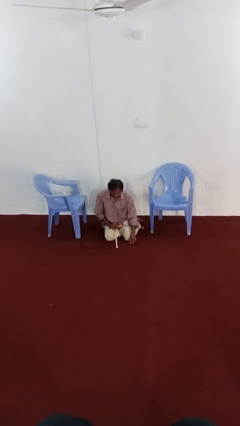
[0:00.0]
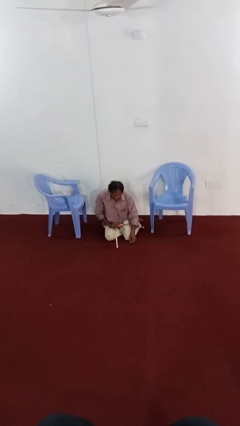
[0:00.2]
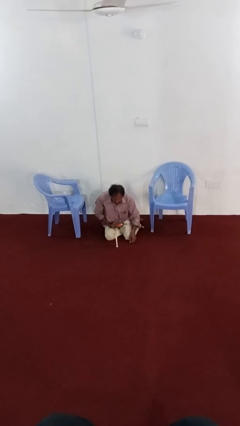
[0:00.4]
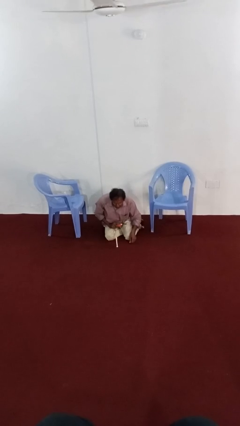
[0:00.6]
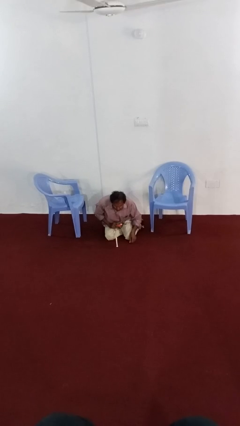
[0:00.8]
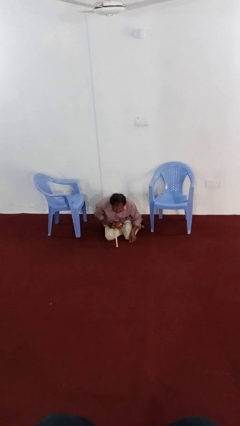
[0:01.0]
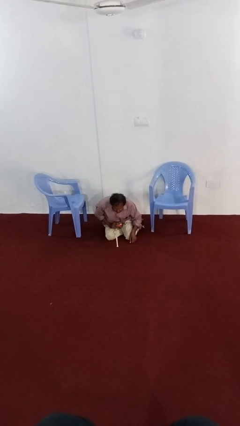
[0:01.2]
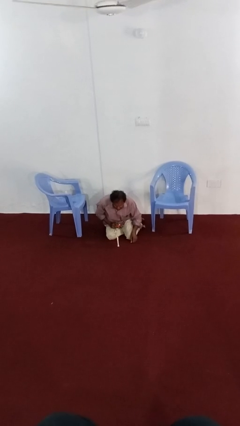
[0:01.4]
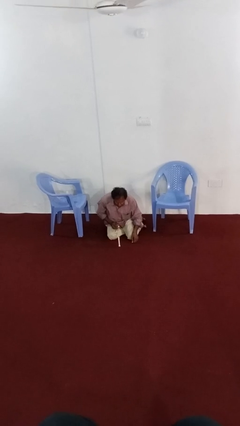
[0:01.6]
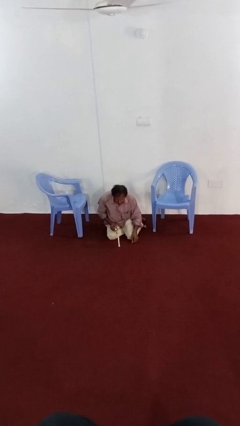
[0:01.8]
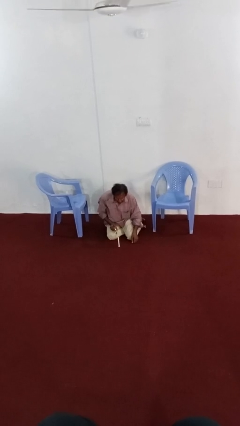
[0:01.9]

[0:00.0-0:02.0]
person extinguishes candle

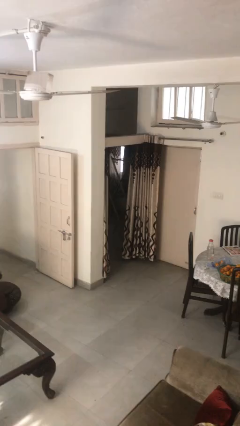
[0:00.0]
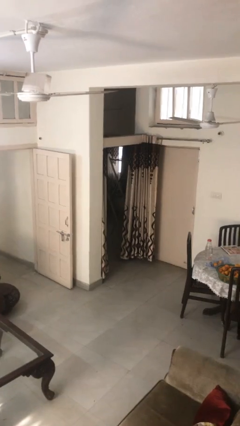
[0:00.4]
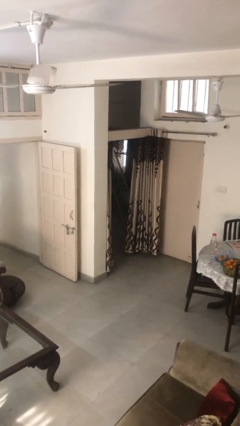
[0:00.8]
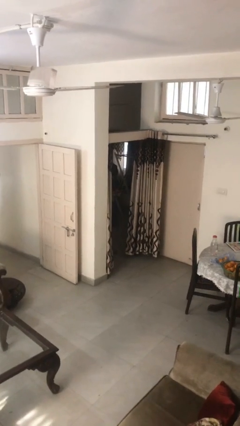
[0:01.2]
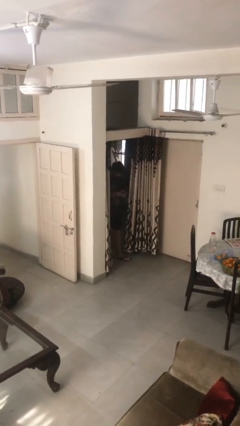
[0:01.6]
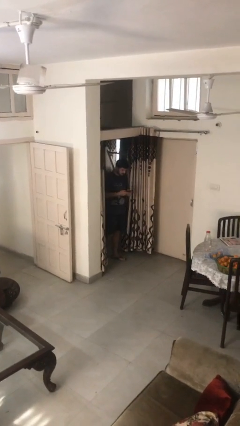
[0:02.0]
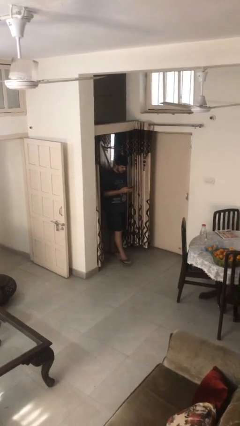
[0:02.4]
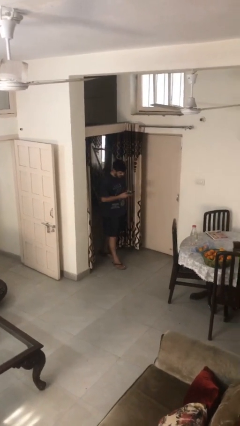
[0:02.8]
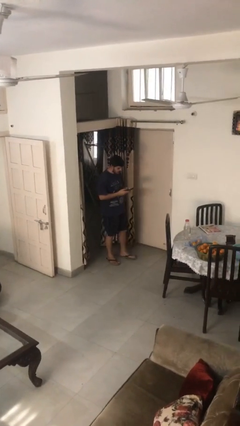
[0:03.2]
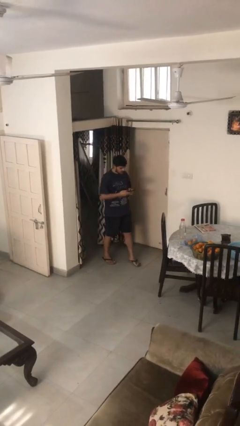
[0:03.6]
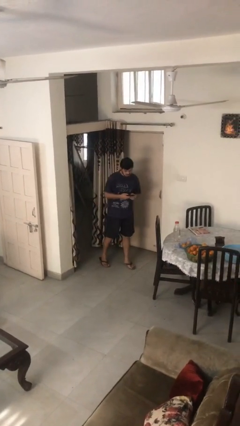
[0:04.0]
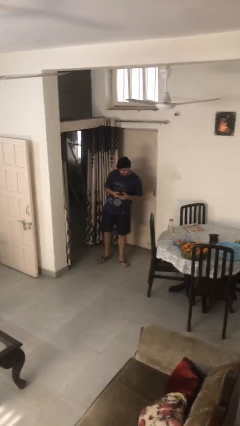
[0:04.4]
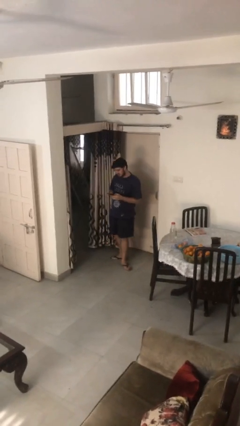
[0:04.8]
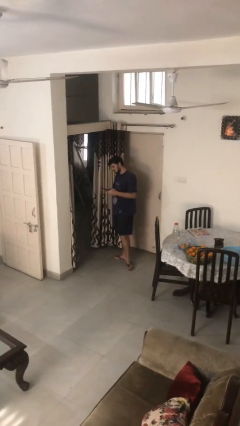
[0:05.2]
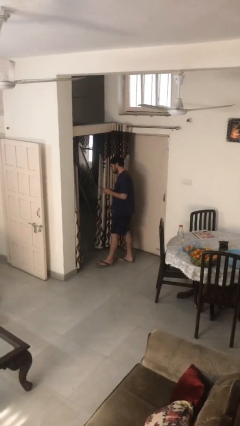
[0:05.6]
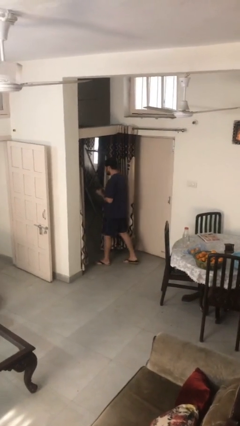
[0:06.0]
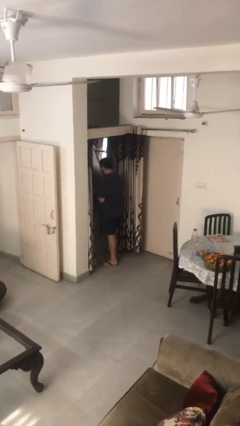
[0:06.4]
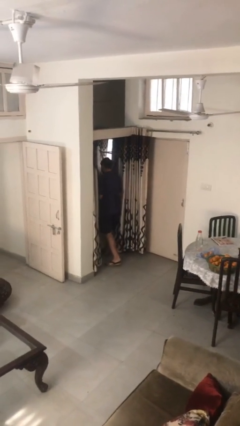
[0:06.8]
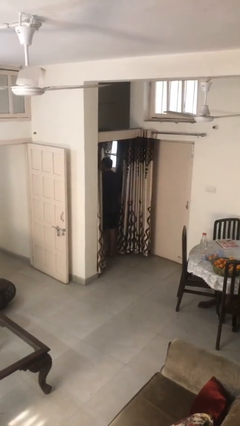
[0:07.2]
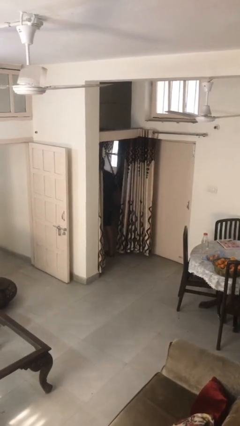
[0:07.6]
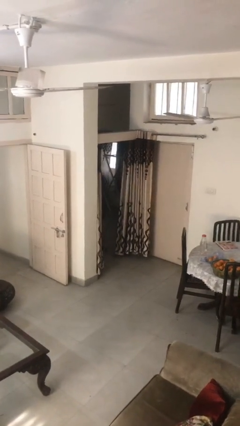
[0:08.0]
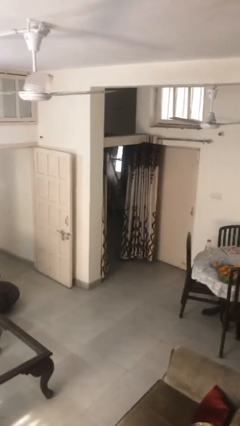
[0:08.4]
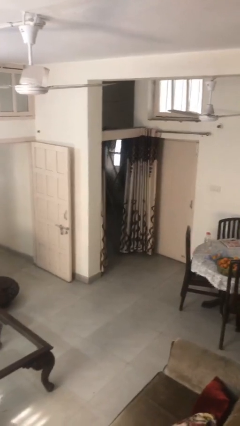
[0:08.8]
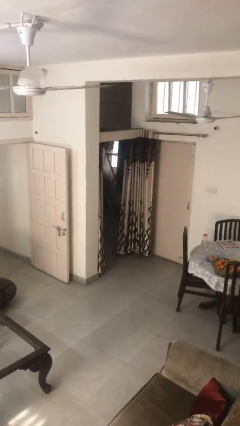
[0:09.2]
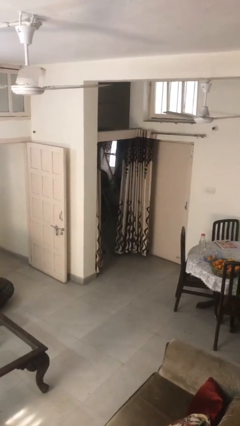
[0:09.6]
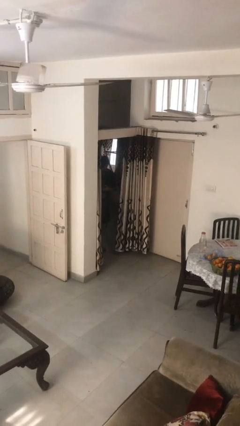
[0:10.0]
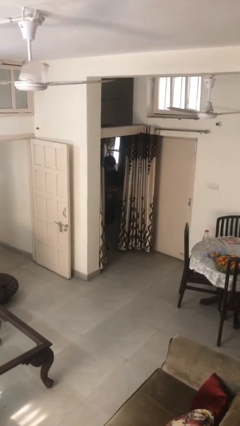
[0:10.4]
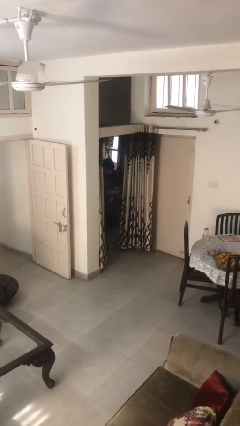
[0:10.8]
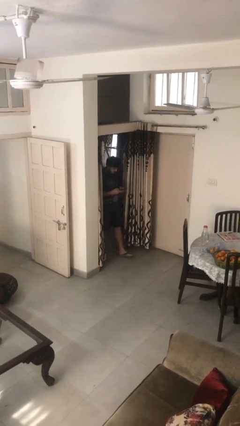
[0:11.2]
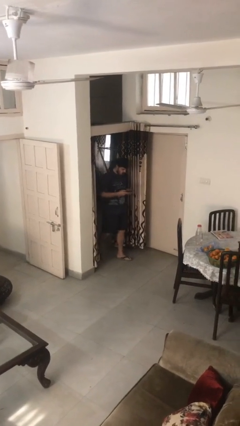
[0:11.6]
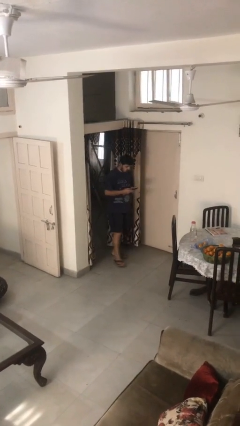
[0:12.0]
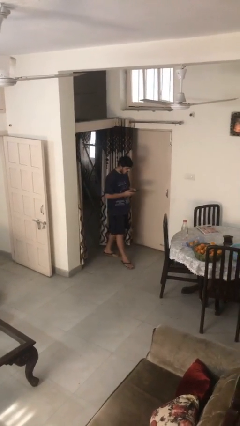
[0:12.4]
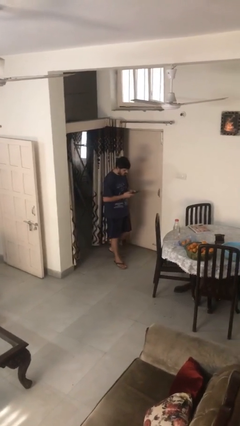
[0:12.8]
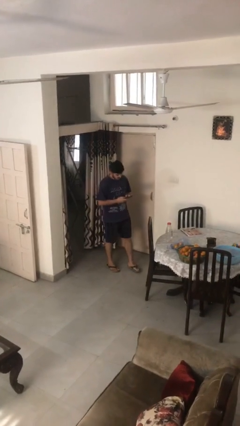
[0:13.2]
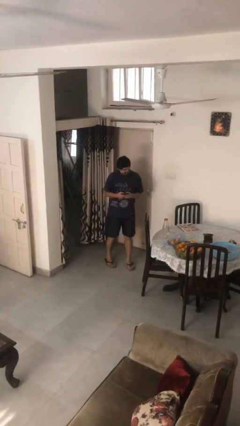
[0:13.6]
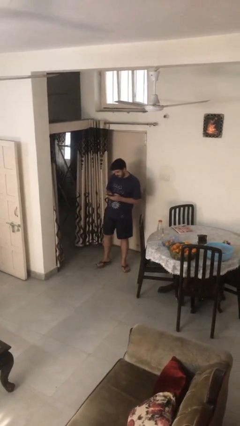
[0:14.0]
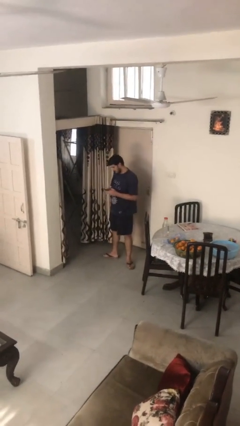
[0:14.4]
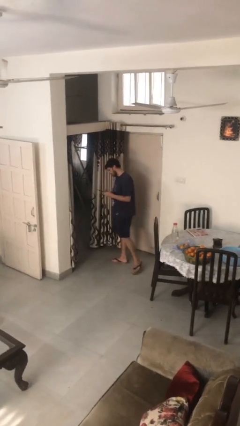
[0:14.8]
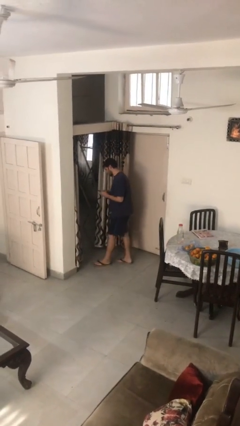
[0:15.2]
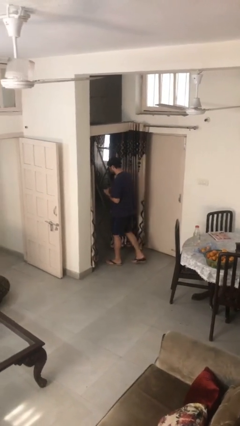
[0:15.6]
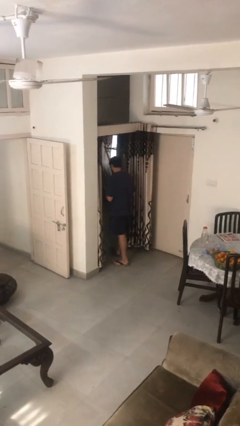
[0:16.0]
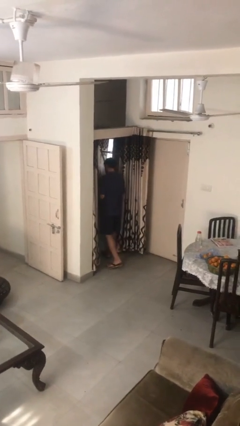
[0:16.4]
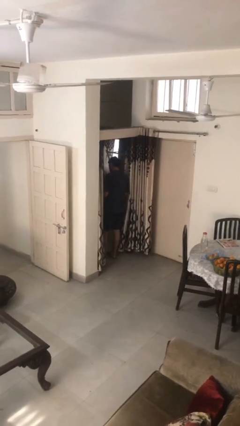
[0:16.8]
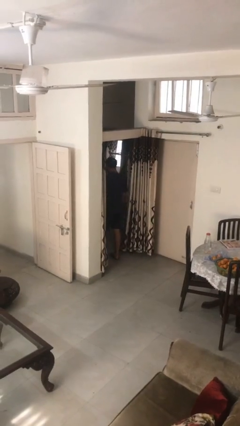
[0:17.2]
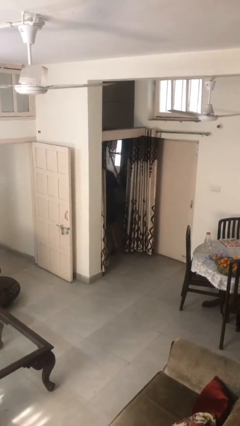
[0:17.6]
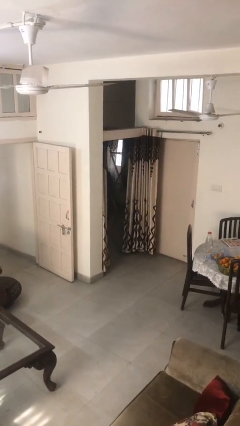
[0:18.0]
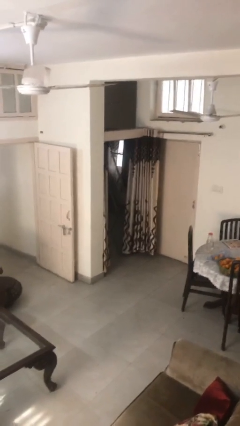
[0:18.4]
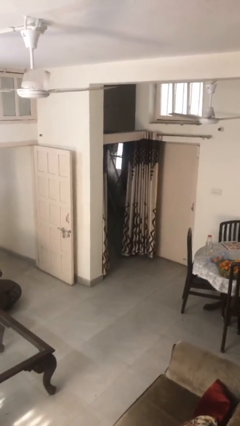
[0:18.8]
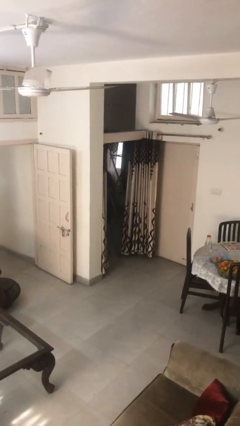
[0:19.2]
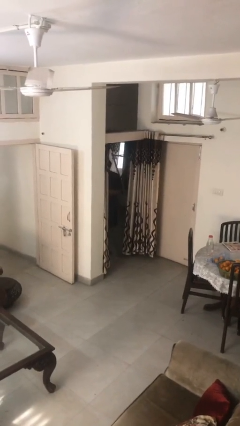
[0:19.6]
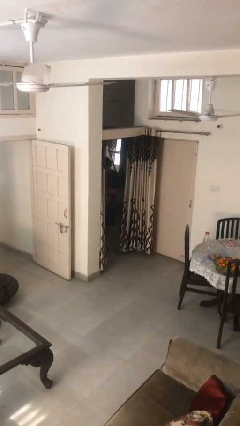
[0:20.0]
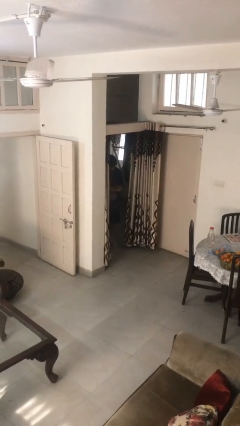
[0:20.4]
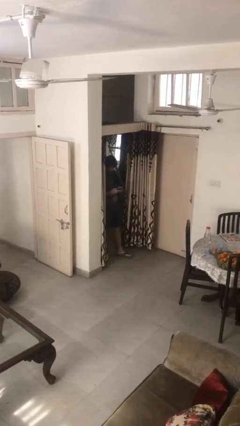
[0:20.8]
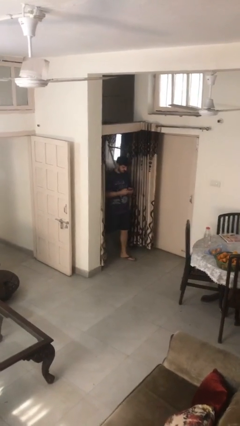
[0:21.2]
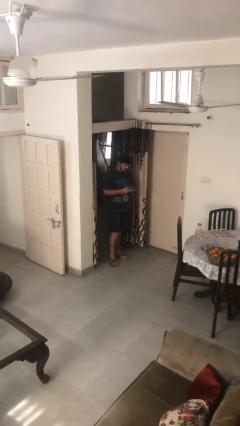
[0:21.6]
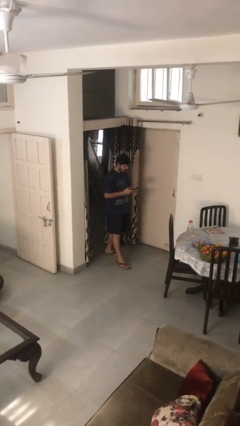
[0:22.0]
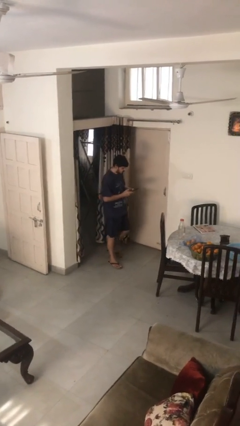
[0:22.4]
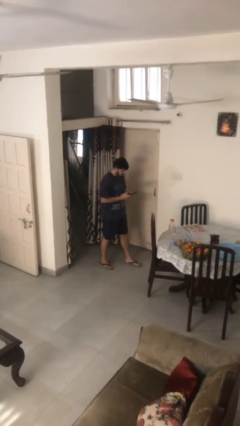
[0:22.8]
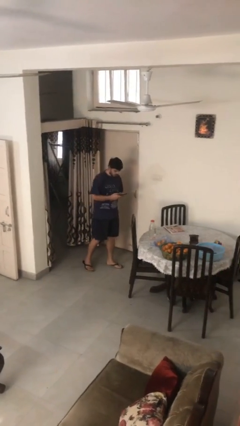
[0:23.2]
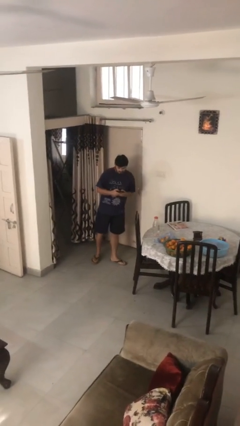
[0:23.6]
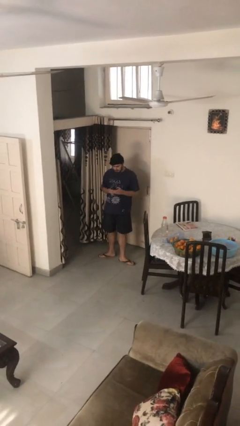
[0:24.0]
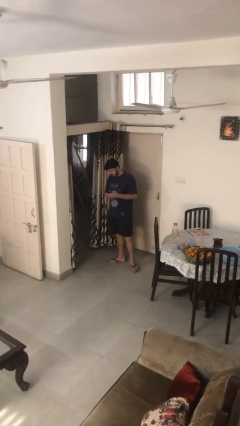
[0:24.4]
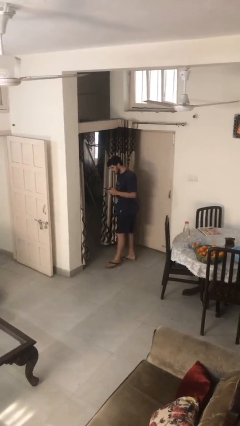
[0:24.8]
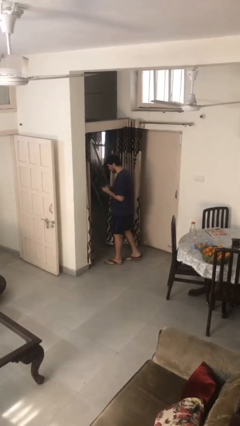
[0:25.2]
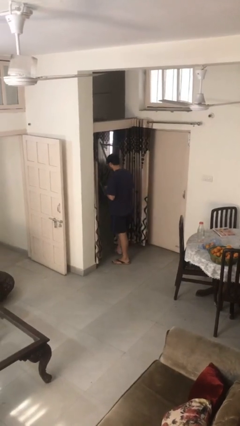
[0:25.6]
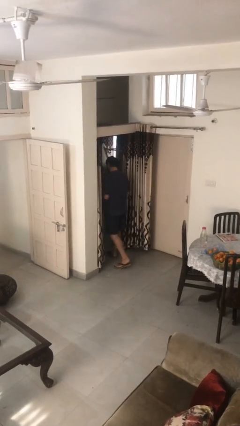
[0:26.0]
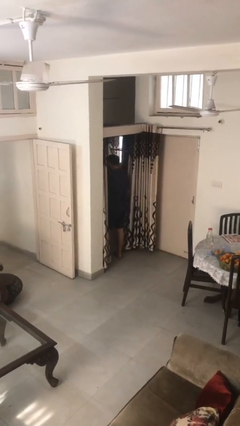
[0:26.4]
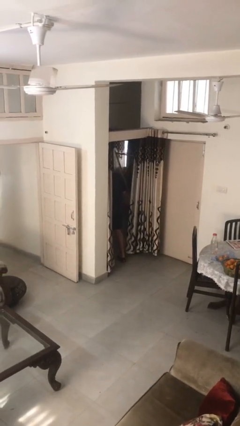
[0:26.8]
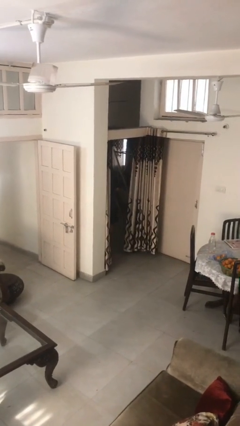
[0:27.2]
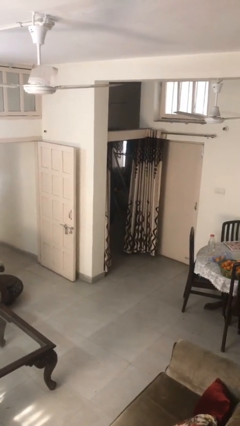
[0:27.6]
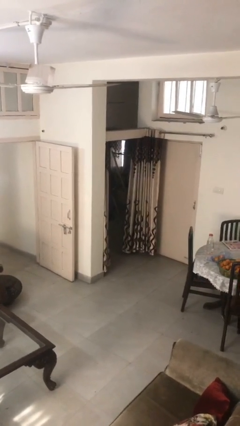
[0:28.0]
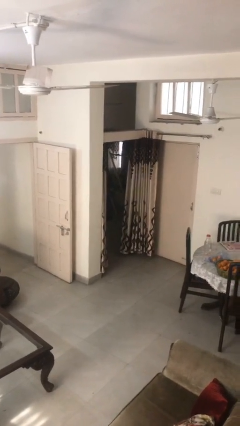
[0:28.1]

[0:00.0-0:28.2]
person texts on phone

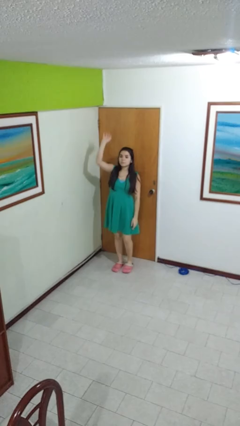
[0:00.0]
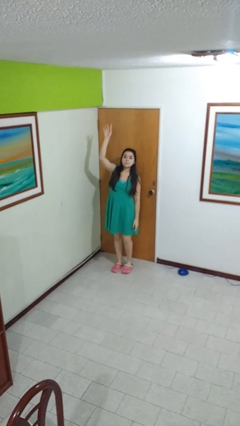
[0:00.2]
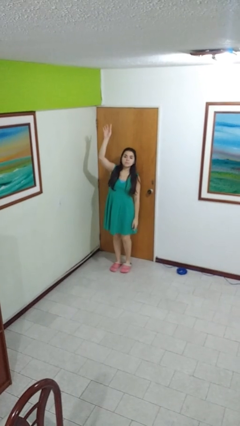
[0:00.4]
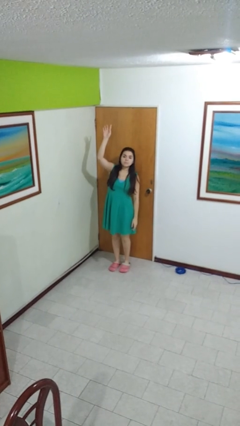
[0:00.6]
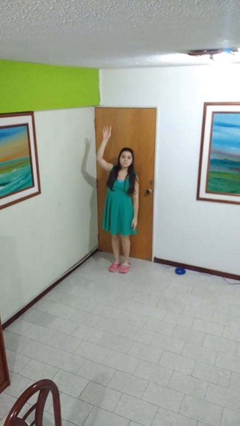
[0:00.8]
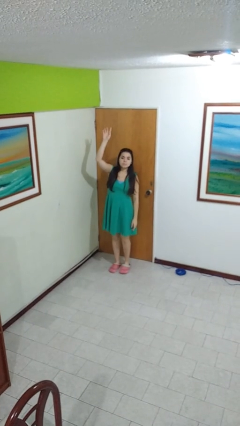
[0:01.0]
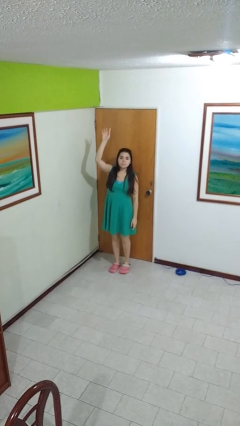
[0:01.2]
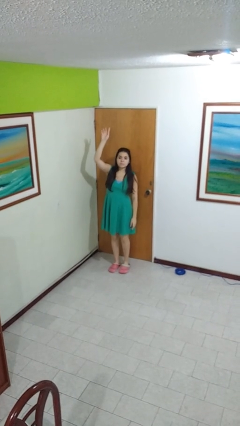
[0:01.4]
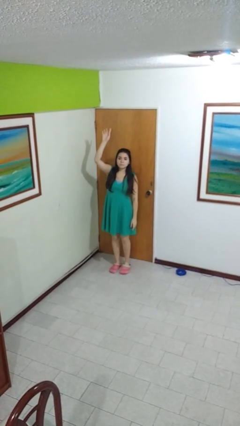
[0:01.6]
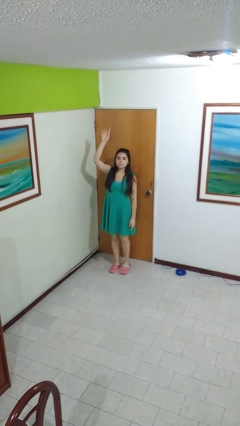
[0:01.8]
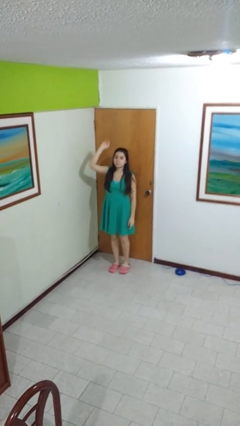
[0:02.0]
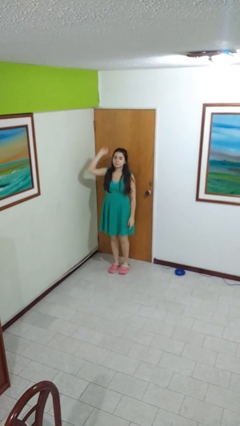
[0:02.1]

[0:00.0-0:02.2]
person gestures raise hand
